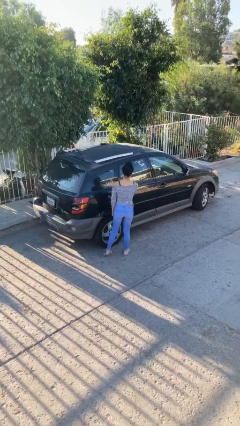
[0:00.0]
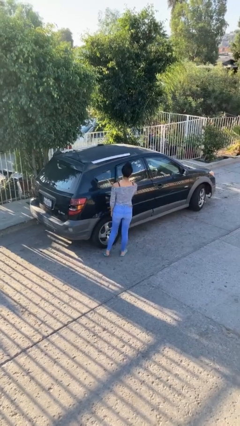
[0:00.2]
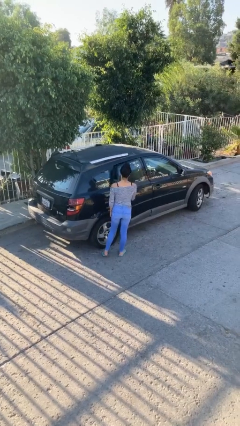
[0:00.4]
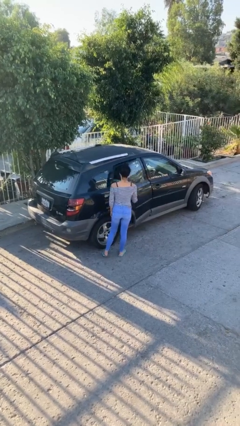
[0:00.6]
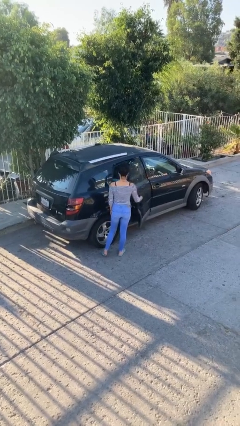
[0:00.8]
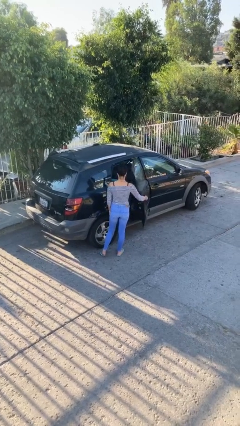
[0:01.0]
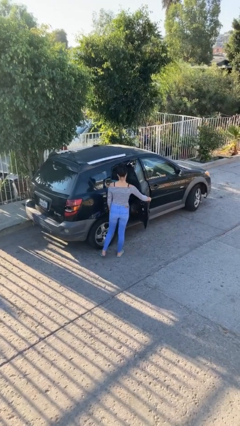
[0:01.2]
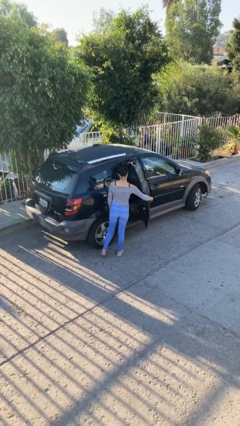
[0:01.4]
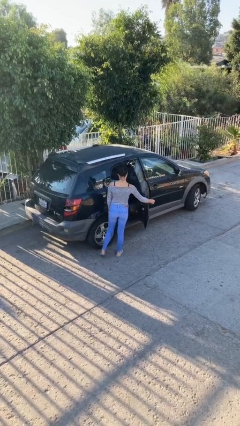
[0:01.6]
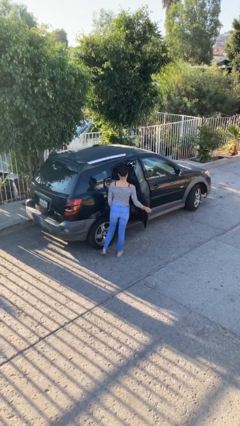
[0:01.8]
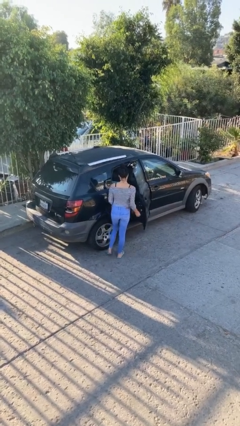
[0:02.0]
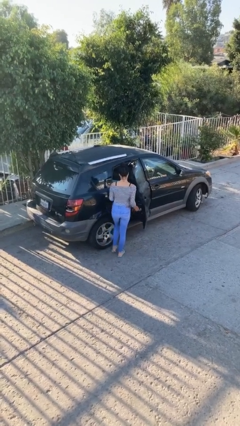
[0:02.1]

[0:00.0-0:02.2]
person opens car door

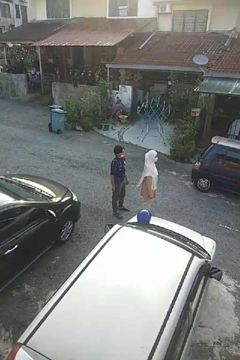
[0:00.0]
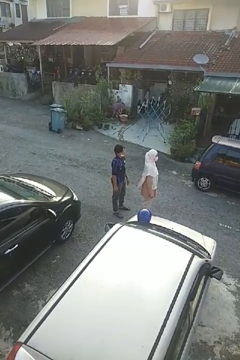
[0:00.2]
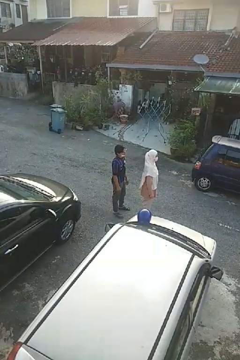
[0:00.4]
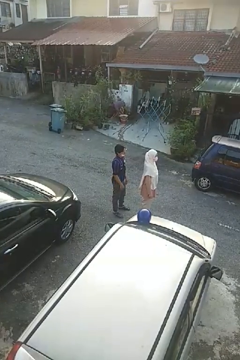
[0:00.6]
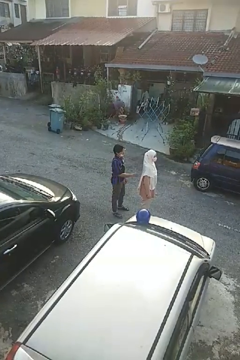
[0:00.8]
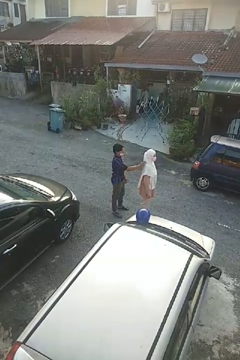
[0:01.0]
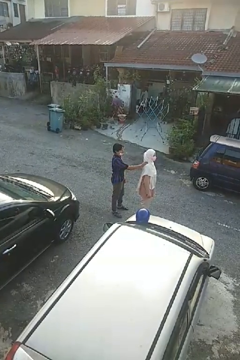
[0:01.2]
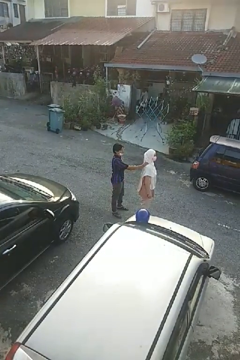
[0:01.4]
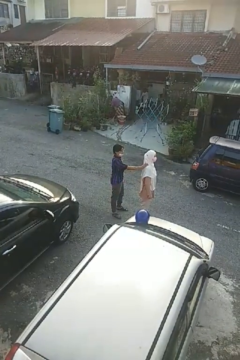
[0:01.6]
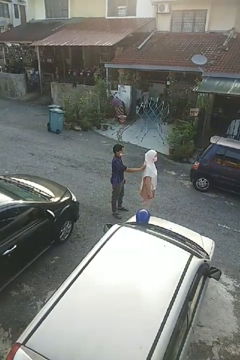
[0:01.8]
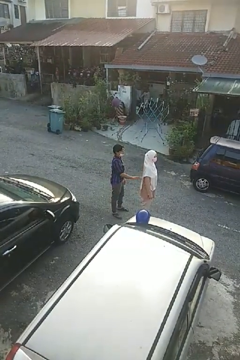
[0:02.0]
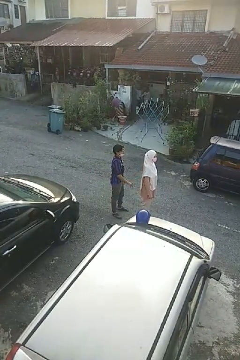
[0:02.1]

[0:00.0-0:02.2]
person touches back of person

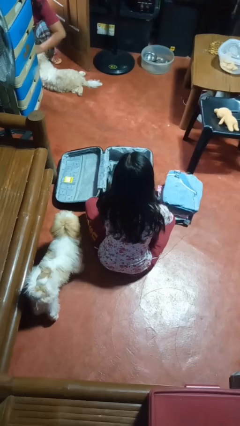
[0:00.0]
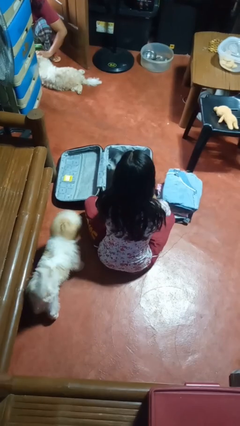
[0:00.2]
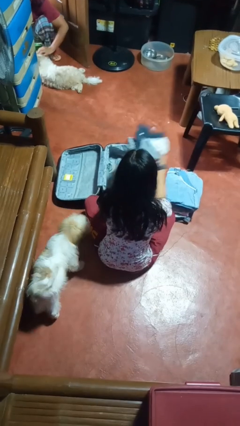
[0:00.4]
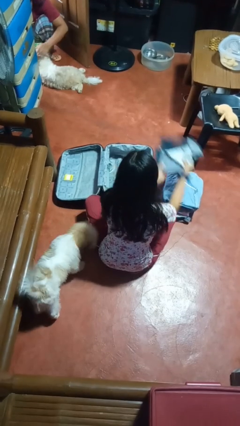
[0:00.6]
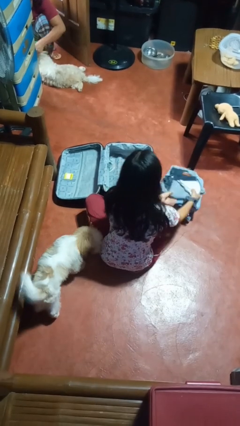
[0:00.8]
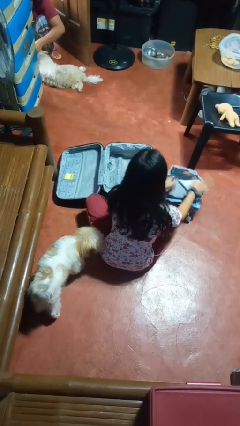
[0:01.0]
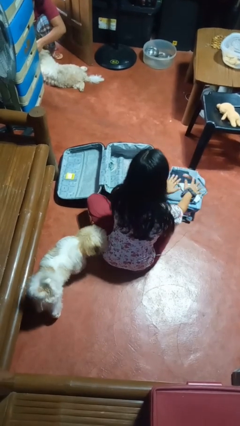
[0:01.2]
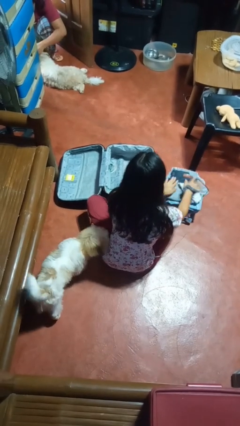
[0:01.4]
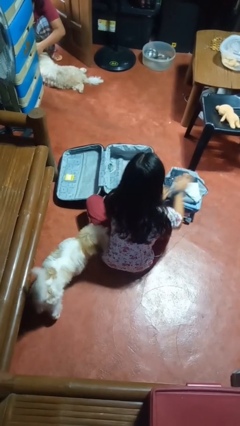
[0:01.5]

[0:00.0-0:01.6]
person unloads clothes from suitcase

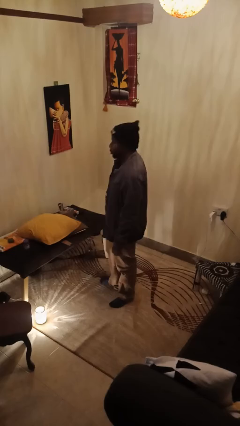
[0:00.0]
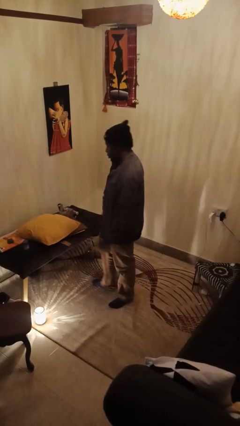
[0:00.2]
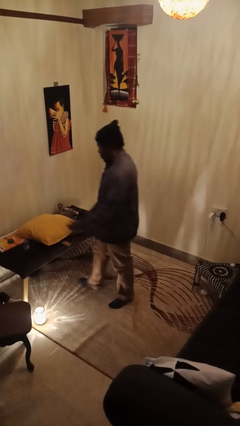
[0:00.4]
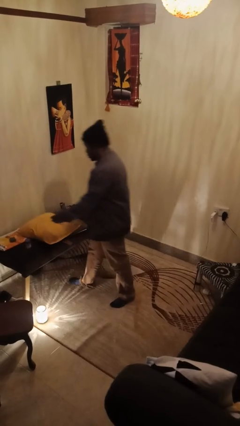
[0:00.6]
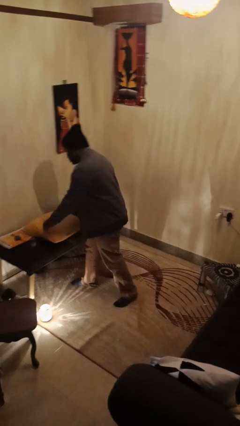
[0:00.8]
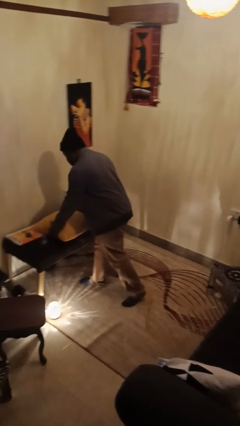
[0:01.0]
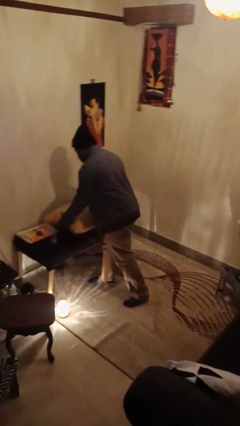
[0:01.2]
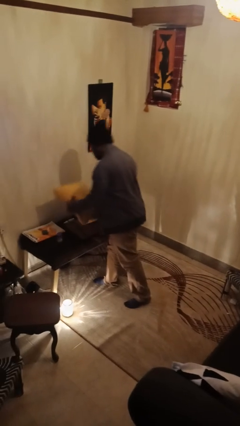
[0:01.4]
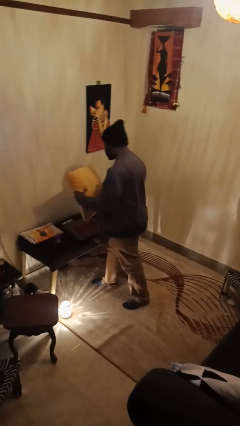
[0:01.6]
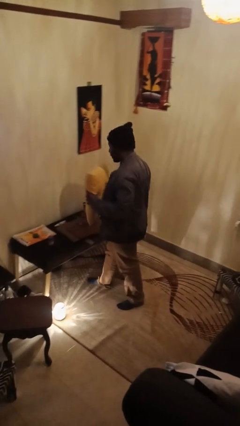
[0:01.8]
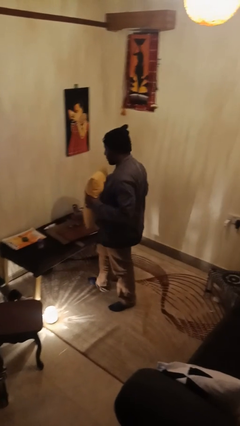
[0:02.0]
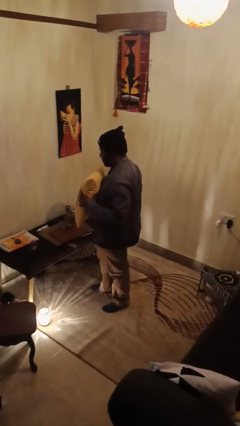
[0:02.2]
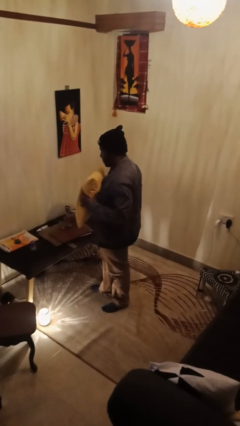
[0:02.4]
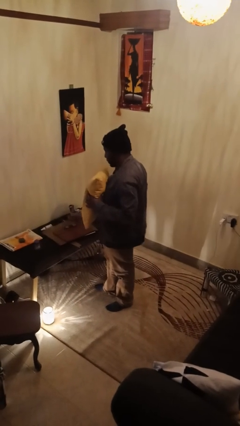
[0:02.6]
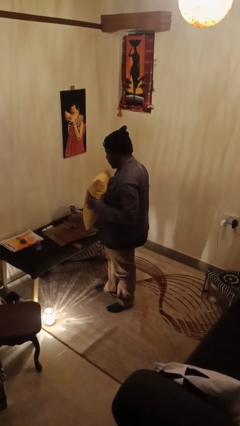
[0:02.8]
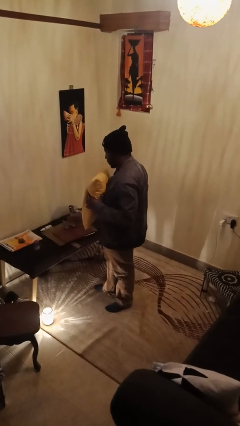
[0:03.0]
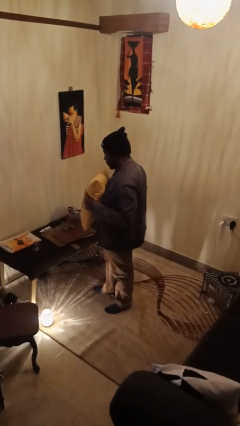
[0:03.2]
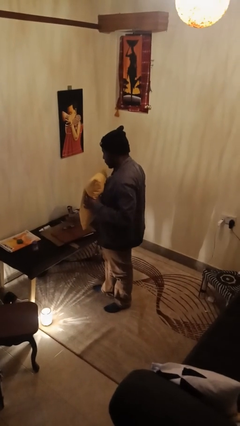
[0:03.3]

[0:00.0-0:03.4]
person picks up object from countertop

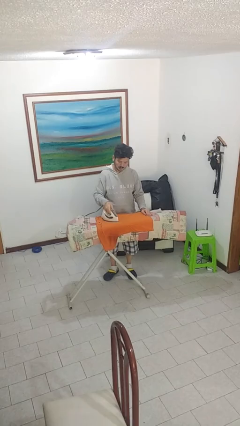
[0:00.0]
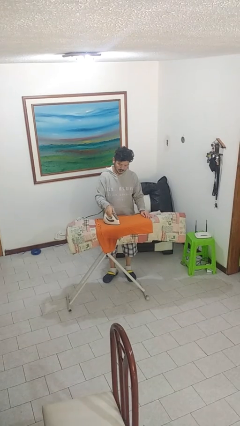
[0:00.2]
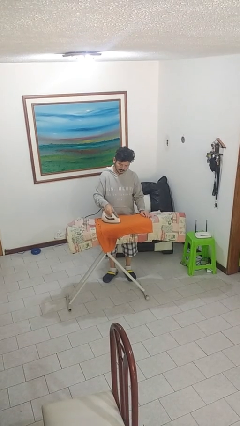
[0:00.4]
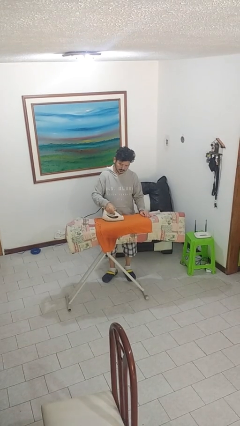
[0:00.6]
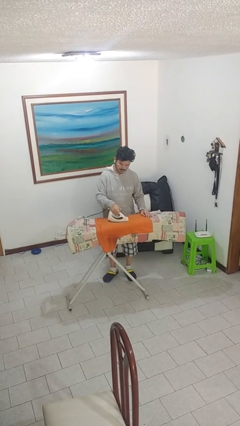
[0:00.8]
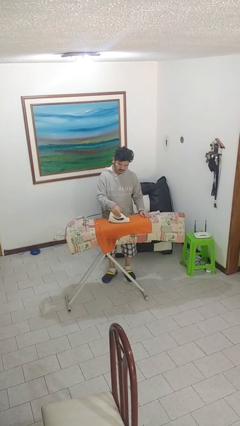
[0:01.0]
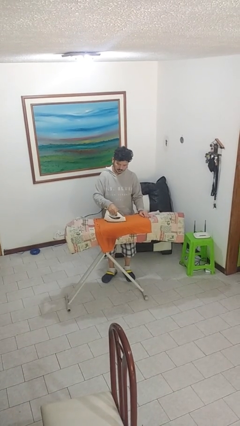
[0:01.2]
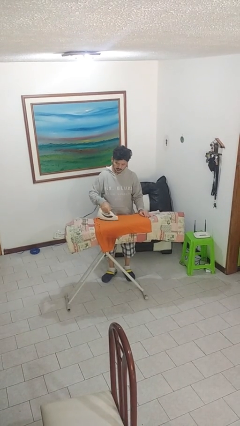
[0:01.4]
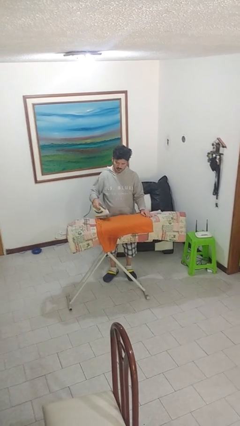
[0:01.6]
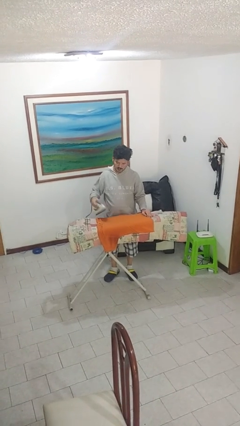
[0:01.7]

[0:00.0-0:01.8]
person irons clothes

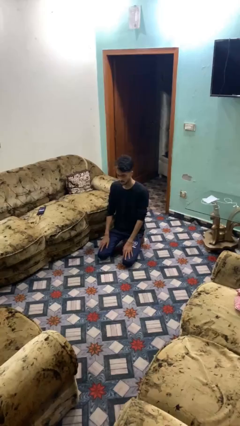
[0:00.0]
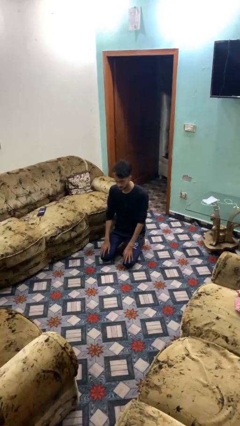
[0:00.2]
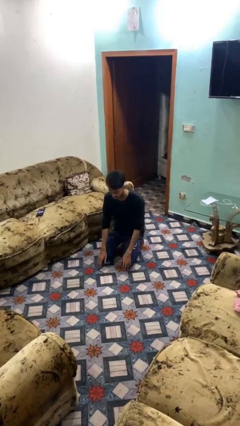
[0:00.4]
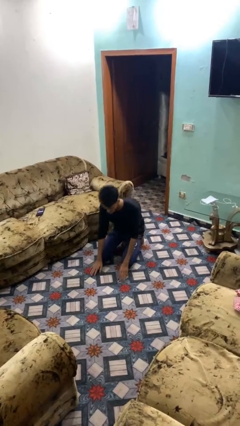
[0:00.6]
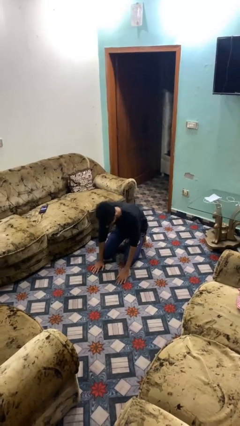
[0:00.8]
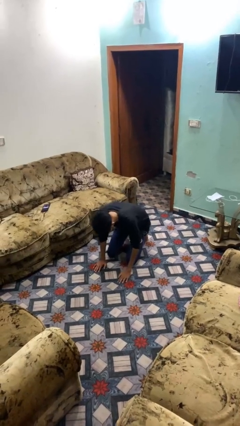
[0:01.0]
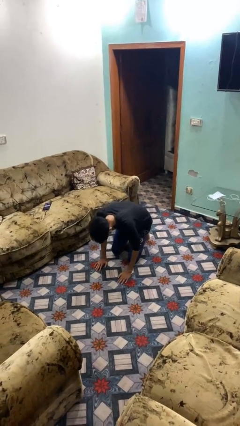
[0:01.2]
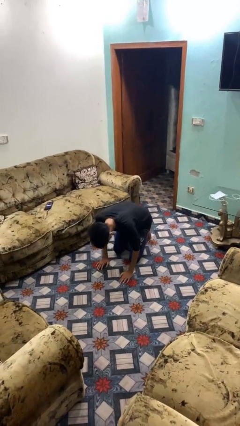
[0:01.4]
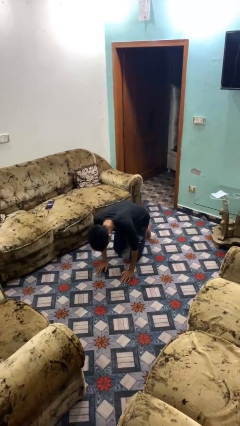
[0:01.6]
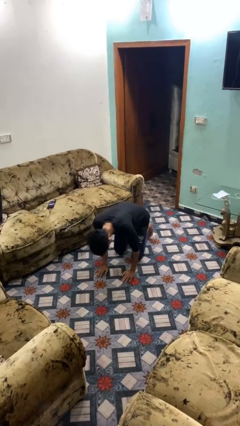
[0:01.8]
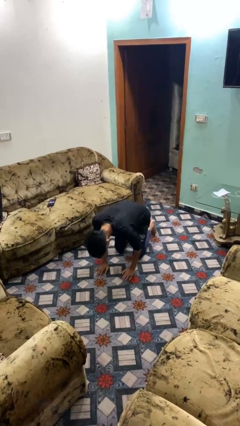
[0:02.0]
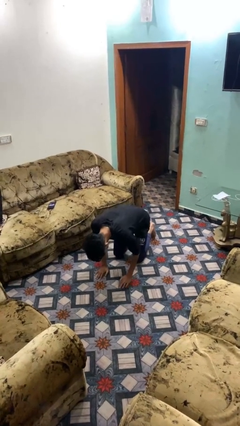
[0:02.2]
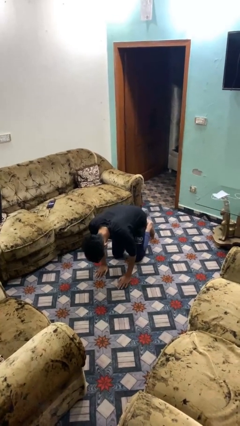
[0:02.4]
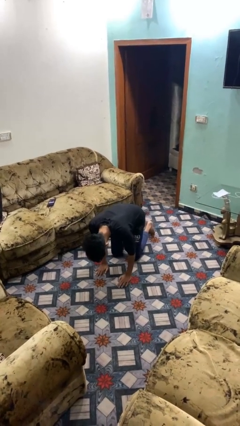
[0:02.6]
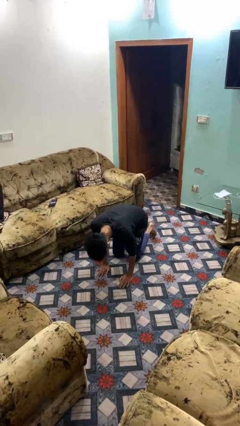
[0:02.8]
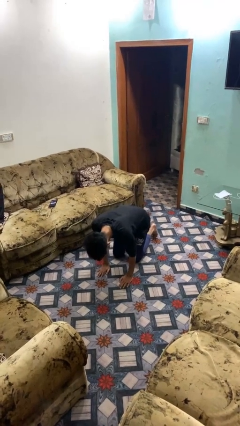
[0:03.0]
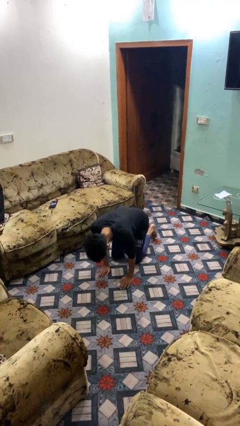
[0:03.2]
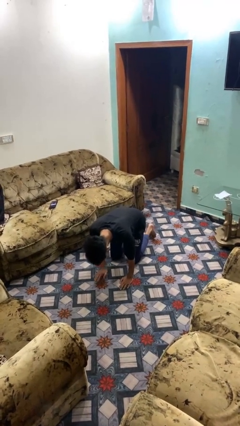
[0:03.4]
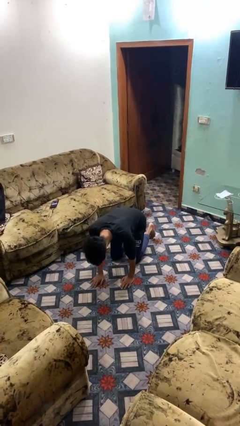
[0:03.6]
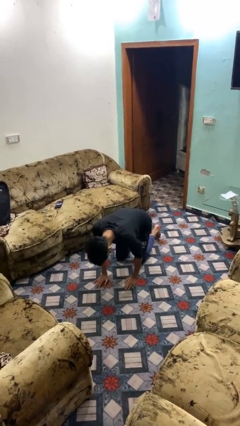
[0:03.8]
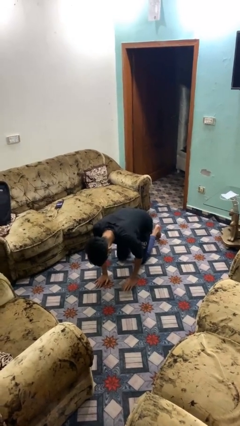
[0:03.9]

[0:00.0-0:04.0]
person crawls

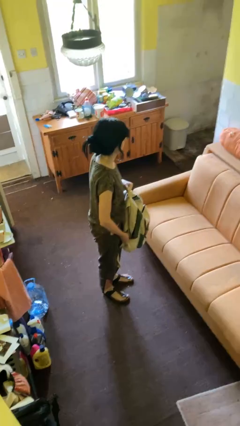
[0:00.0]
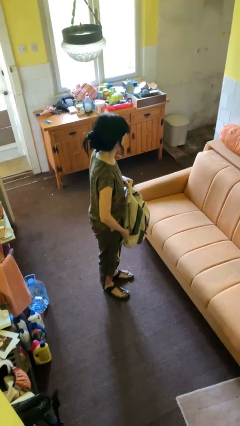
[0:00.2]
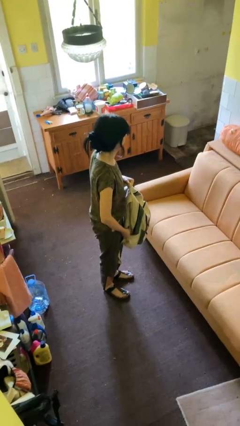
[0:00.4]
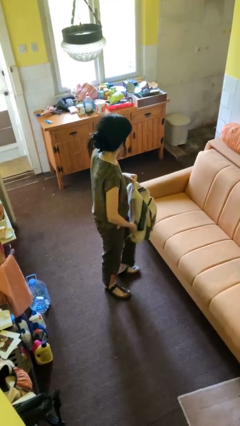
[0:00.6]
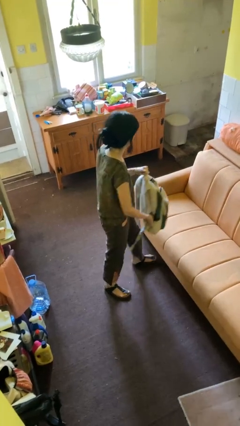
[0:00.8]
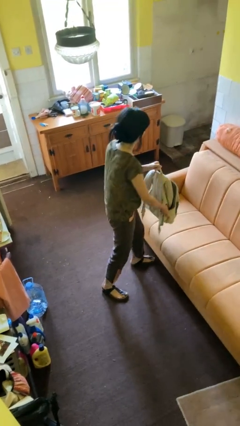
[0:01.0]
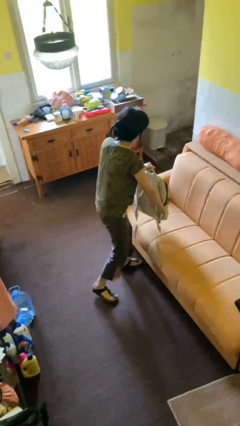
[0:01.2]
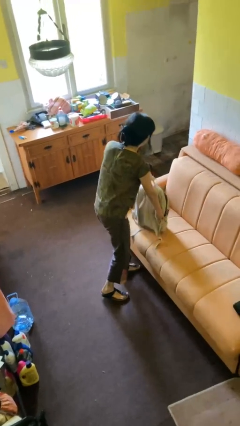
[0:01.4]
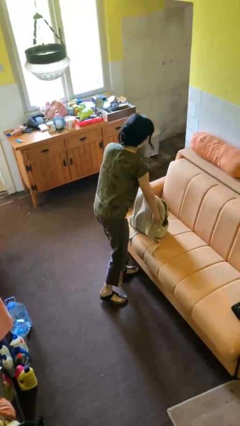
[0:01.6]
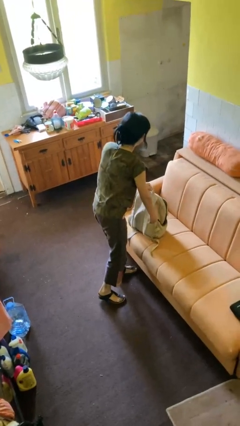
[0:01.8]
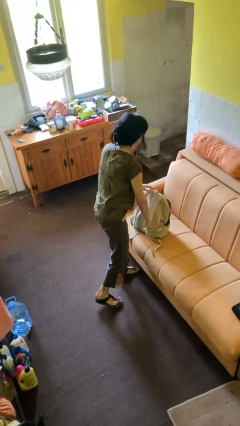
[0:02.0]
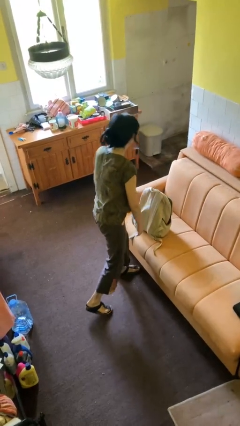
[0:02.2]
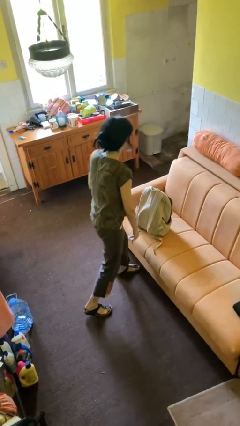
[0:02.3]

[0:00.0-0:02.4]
person puts down object on couch
